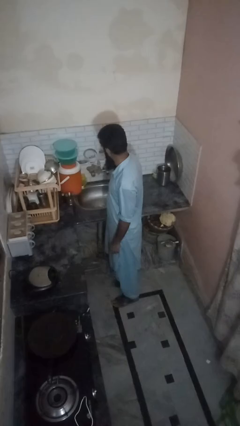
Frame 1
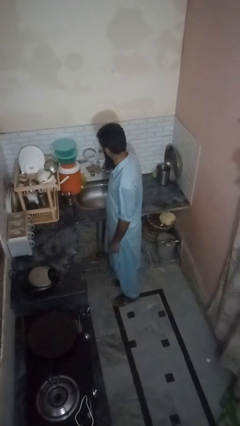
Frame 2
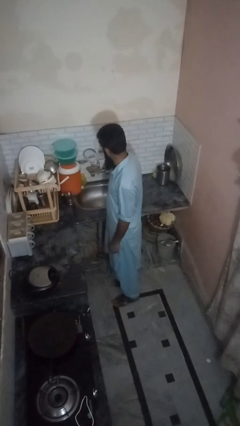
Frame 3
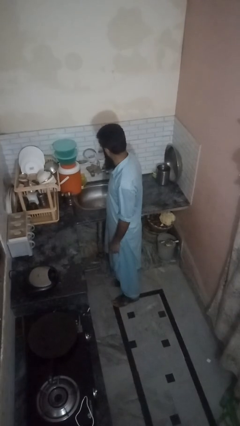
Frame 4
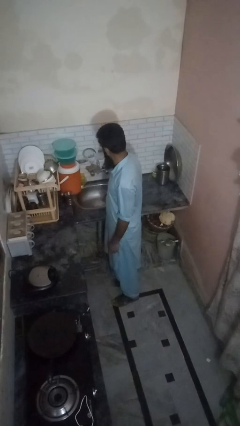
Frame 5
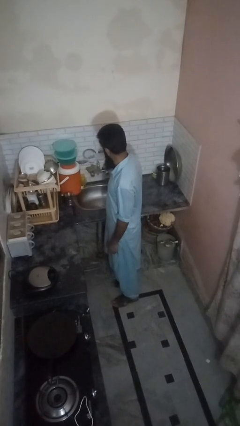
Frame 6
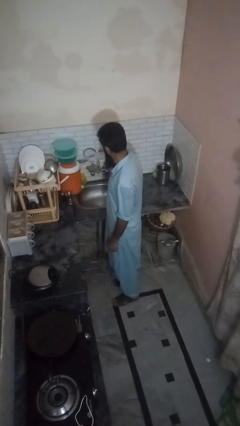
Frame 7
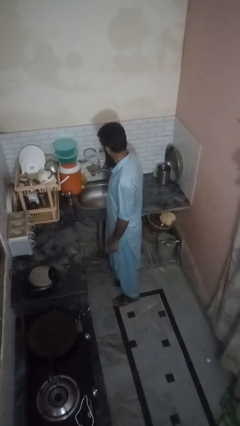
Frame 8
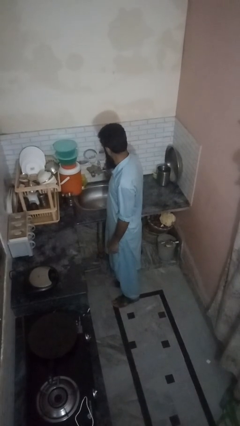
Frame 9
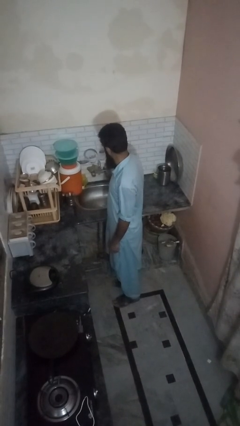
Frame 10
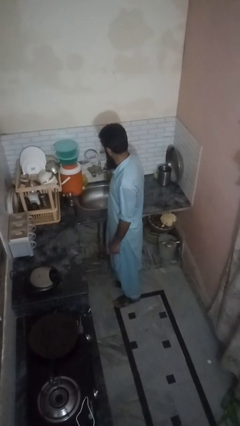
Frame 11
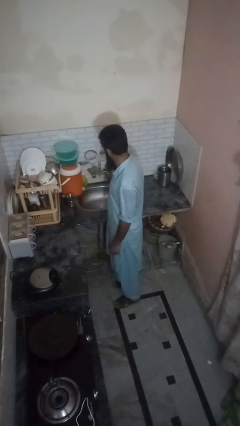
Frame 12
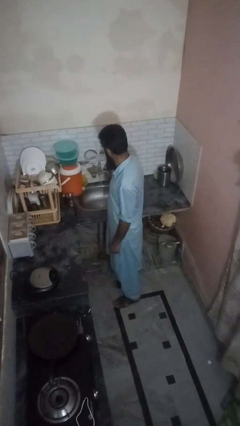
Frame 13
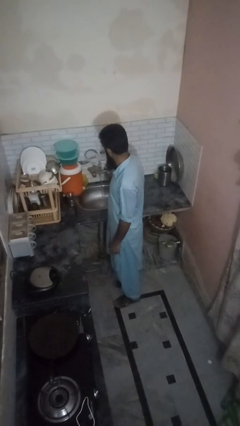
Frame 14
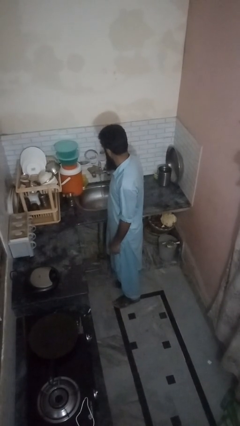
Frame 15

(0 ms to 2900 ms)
person turns on faucet

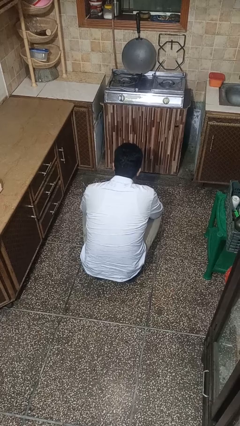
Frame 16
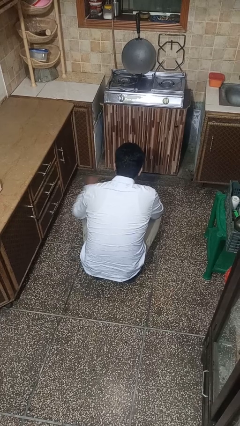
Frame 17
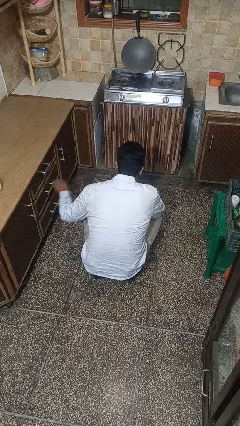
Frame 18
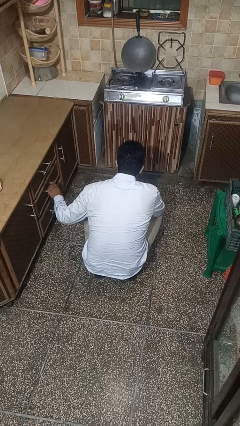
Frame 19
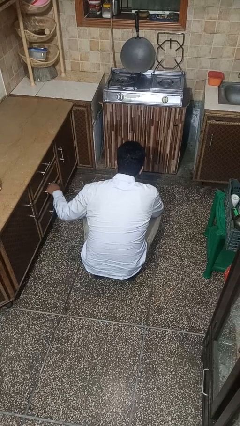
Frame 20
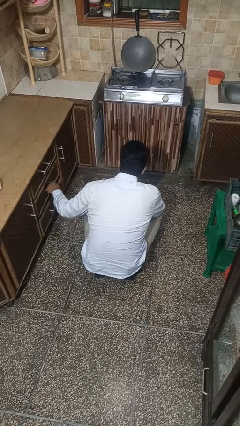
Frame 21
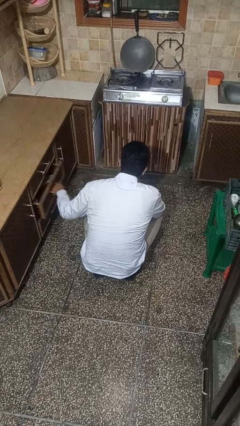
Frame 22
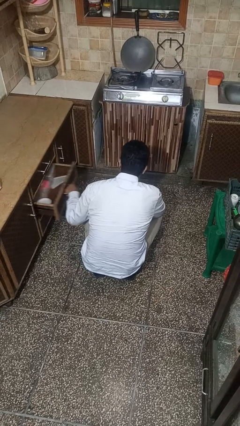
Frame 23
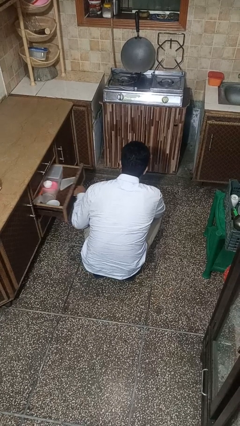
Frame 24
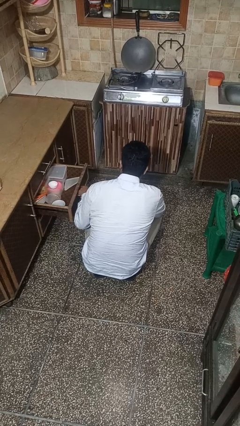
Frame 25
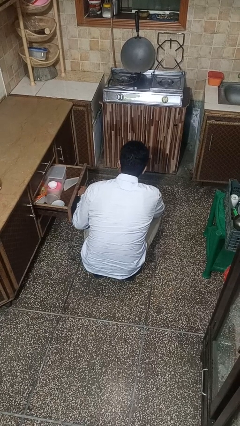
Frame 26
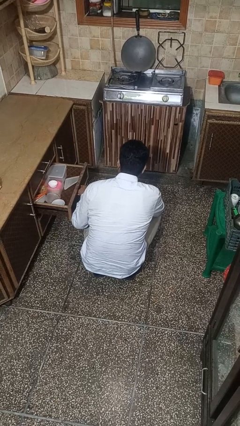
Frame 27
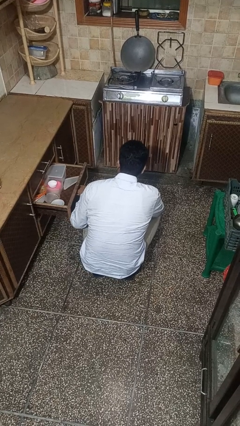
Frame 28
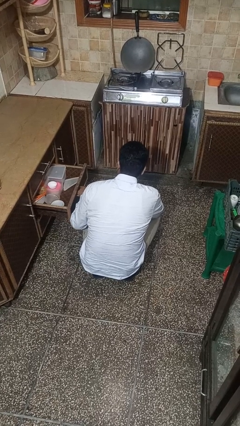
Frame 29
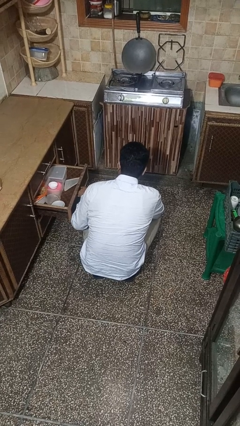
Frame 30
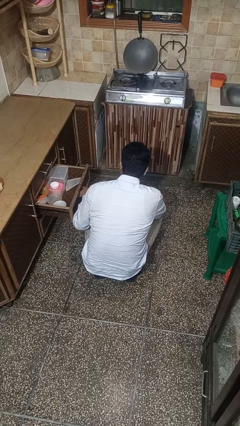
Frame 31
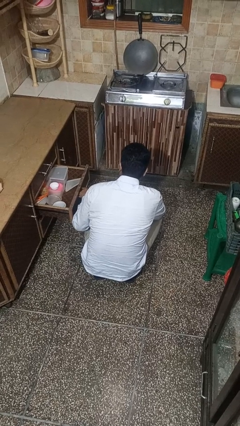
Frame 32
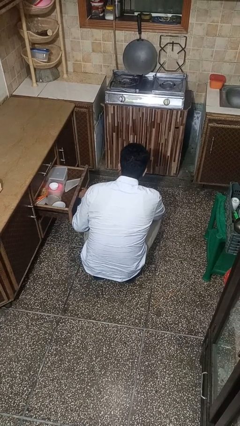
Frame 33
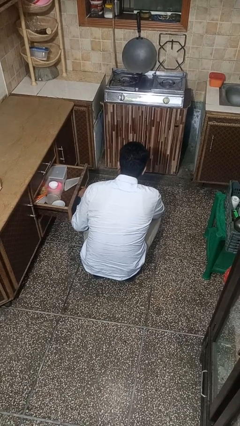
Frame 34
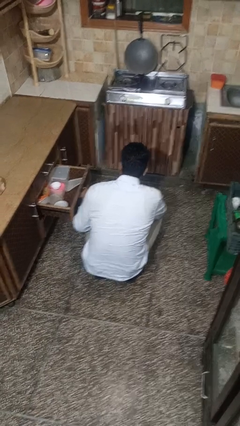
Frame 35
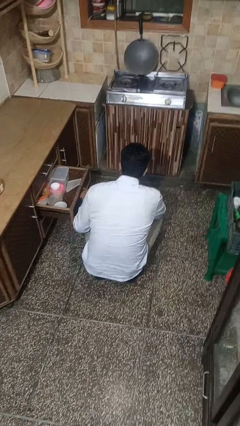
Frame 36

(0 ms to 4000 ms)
person opens kitchen drawer

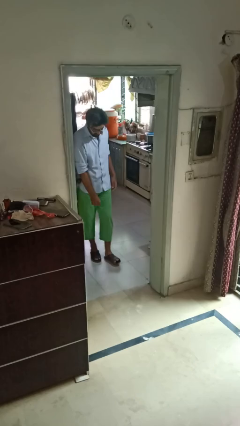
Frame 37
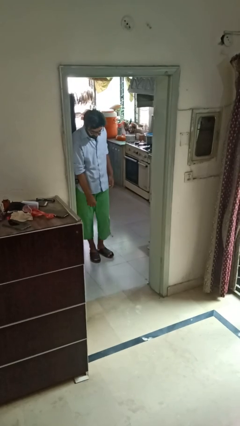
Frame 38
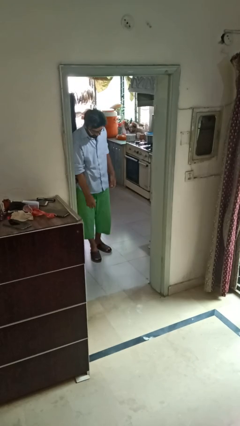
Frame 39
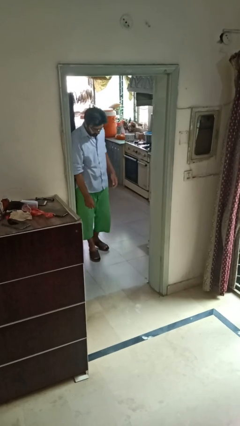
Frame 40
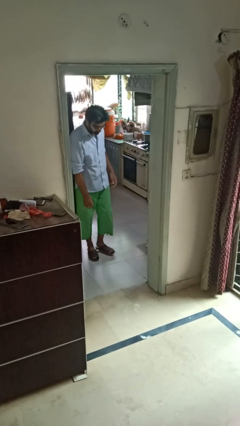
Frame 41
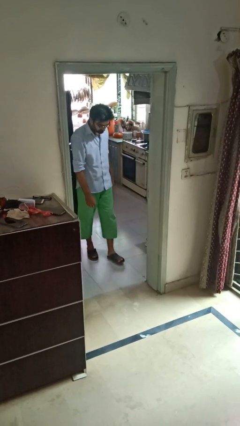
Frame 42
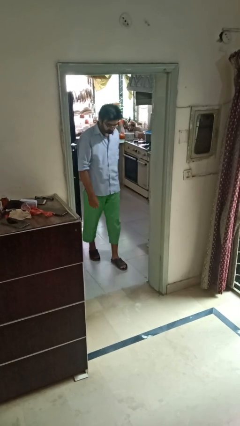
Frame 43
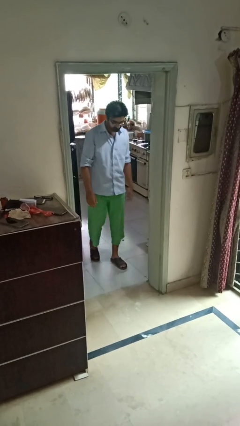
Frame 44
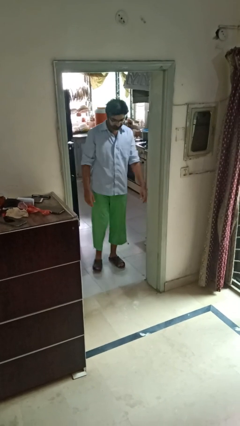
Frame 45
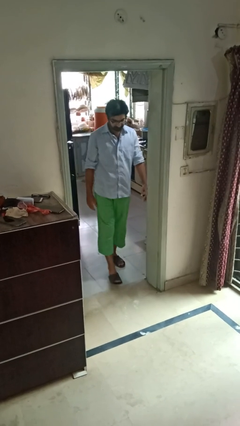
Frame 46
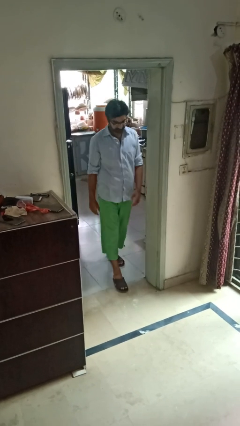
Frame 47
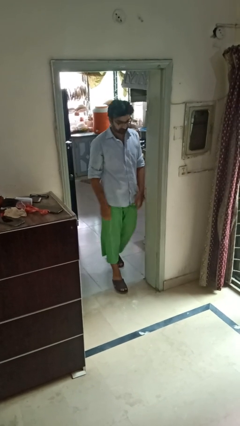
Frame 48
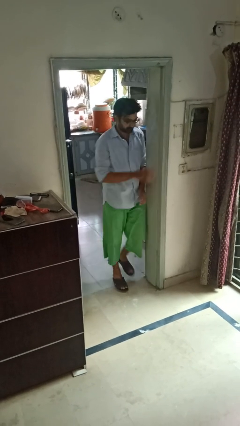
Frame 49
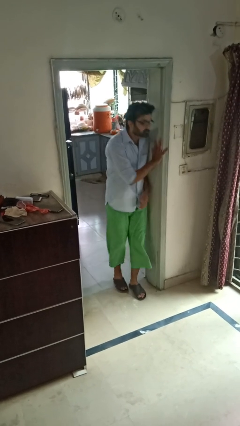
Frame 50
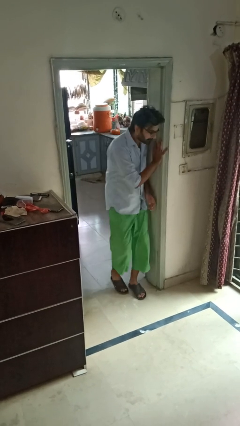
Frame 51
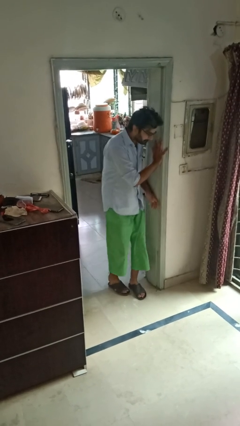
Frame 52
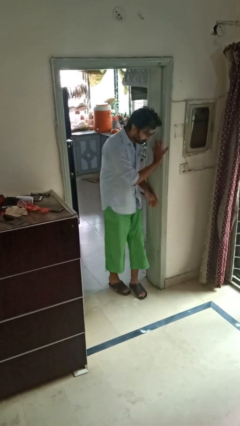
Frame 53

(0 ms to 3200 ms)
person bumps into wall

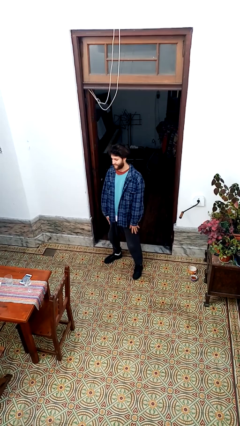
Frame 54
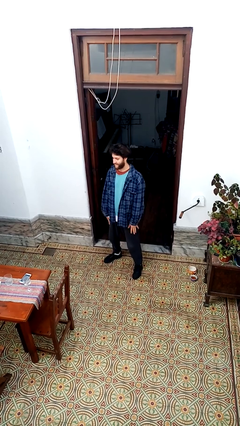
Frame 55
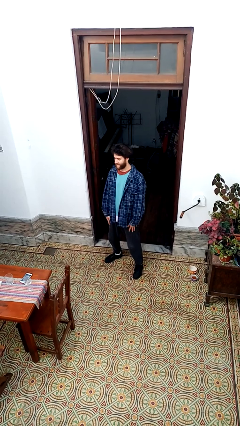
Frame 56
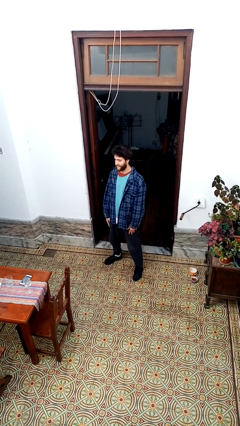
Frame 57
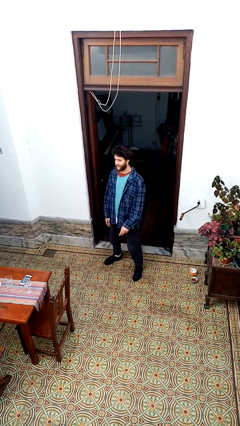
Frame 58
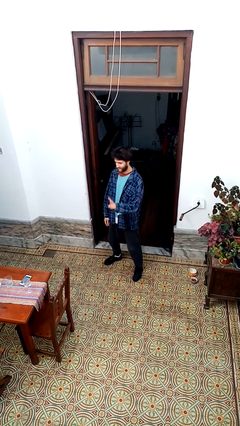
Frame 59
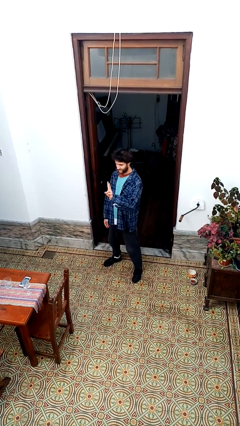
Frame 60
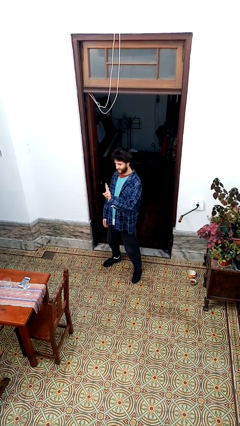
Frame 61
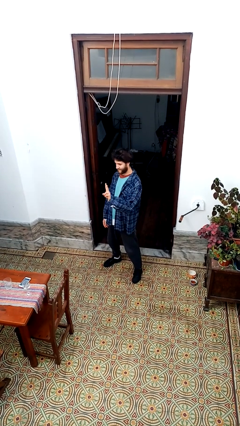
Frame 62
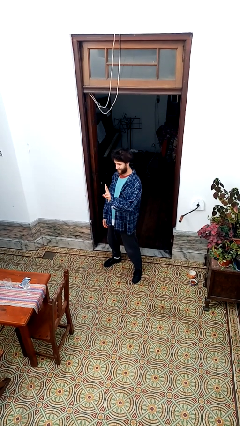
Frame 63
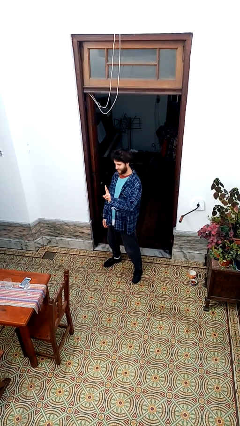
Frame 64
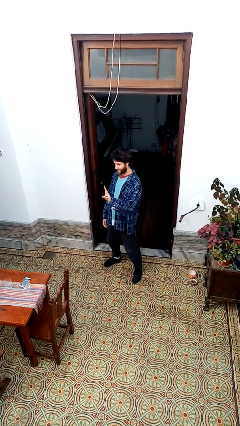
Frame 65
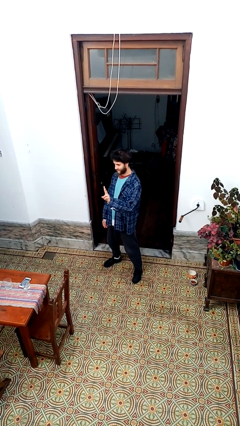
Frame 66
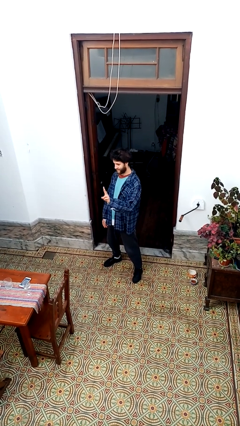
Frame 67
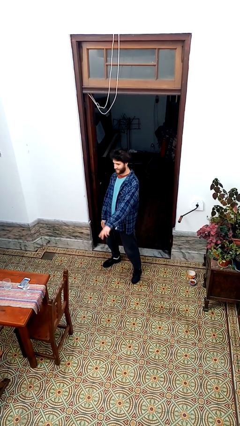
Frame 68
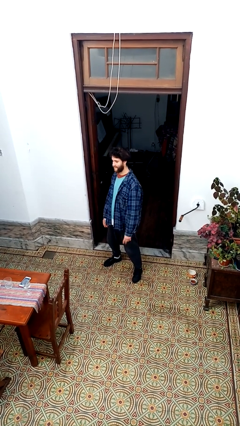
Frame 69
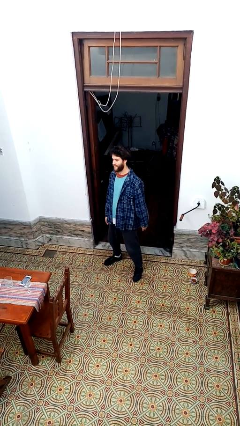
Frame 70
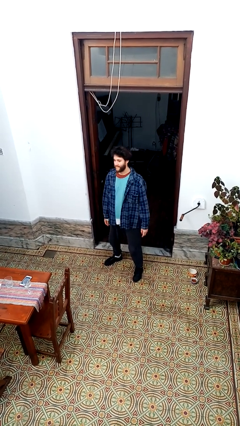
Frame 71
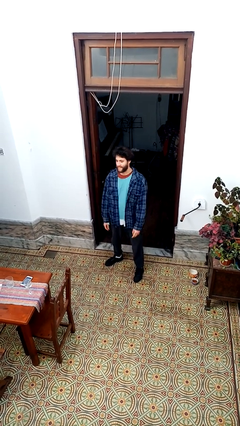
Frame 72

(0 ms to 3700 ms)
person gestures peace

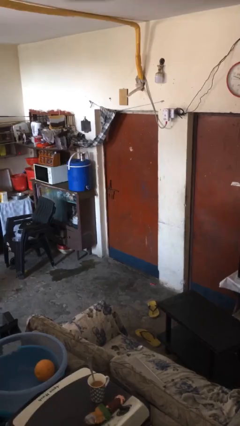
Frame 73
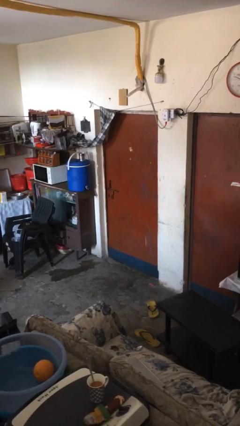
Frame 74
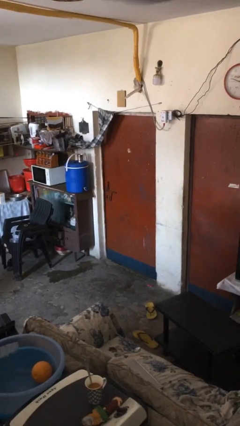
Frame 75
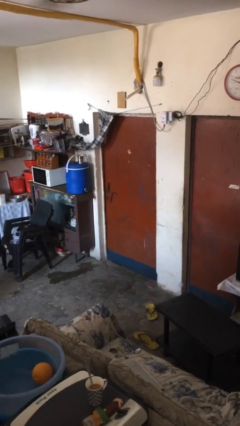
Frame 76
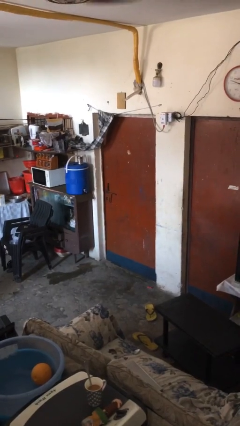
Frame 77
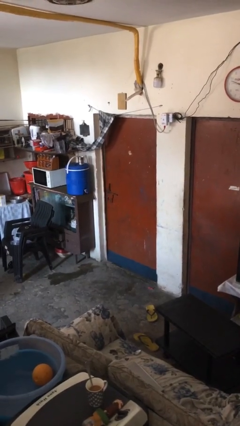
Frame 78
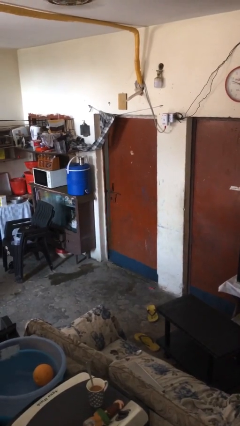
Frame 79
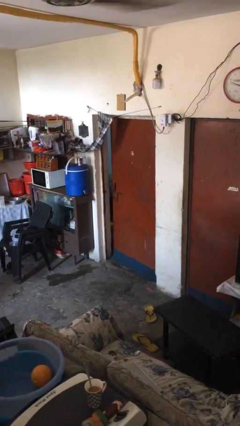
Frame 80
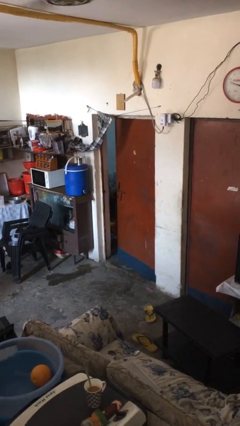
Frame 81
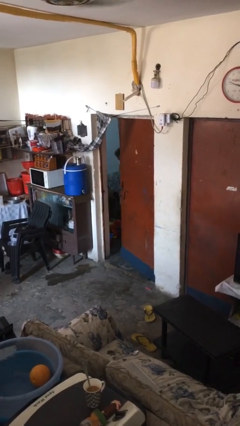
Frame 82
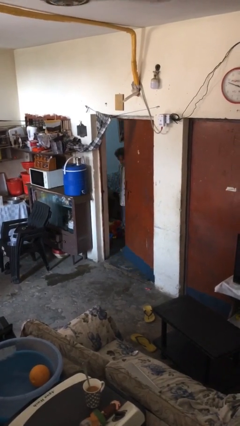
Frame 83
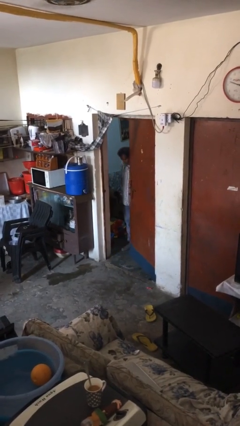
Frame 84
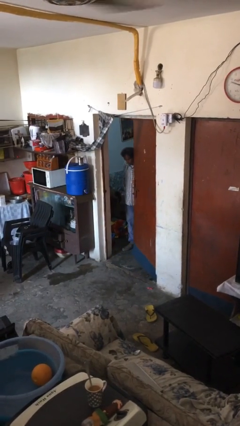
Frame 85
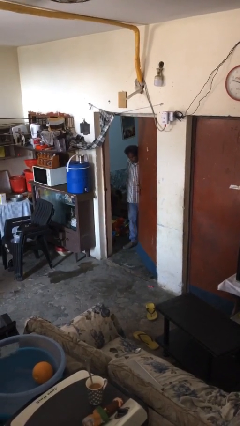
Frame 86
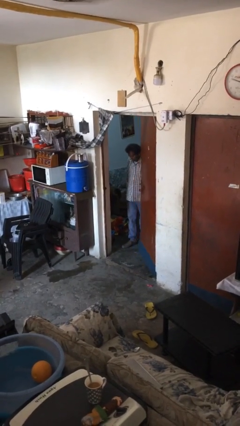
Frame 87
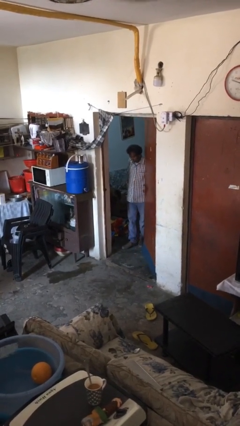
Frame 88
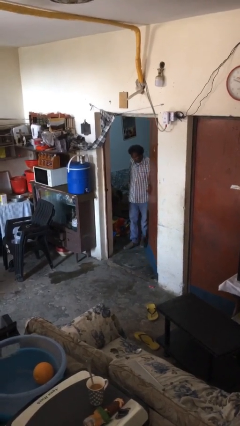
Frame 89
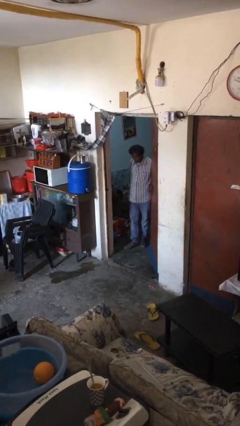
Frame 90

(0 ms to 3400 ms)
person opens facility door

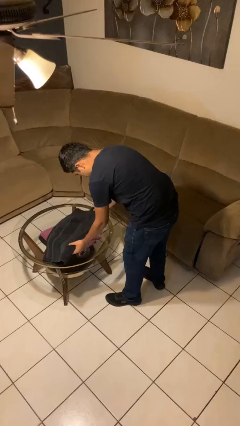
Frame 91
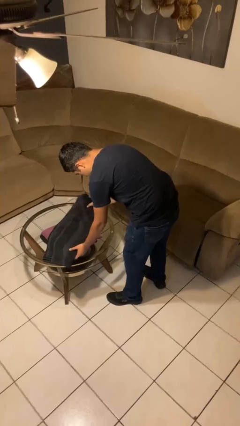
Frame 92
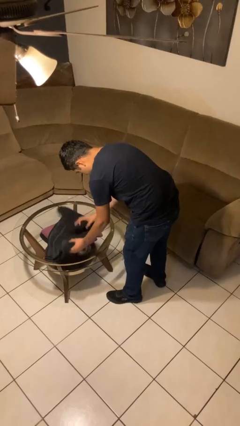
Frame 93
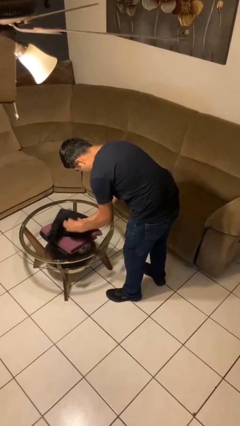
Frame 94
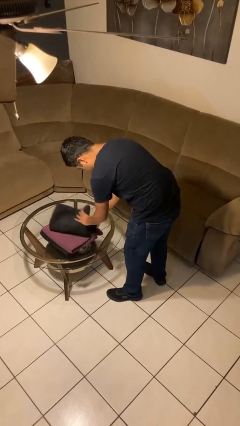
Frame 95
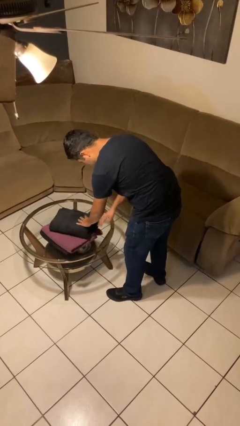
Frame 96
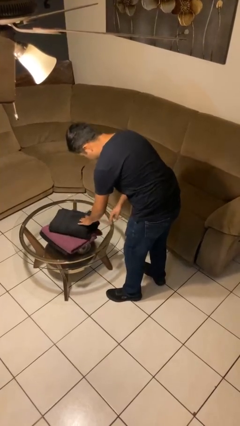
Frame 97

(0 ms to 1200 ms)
person folds towel
